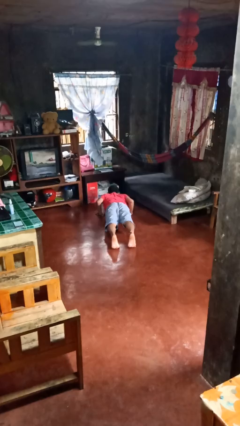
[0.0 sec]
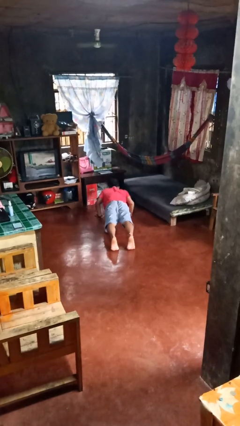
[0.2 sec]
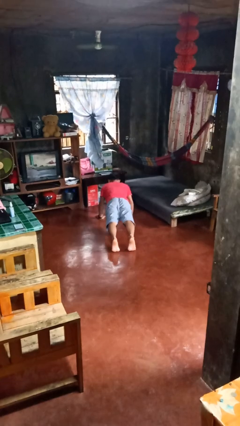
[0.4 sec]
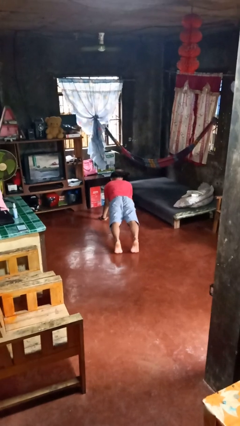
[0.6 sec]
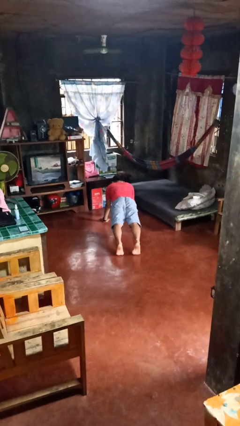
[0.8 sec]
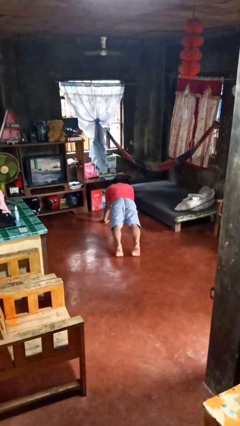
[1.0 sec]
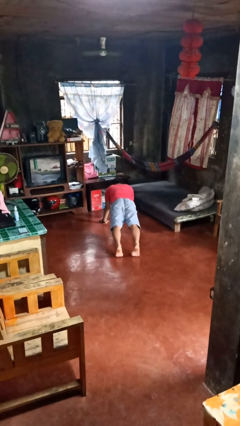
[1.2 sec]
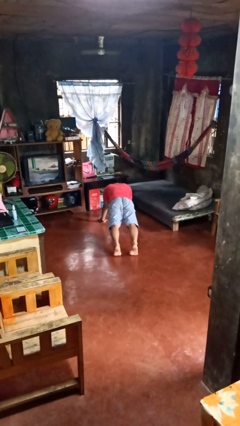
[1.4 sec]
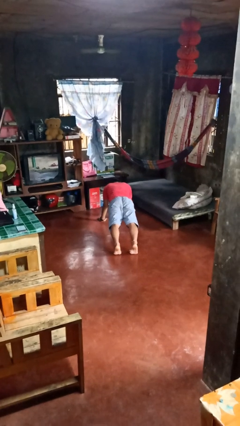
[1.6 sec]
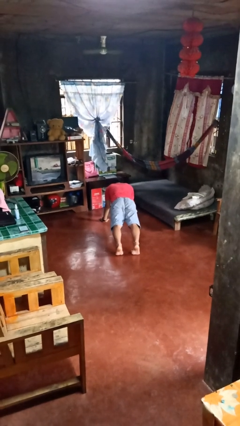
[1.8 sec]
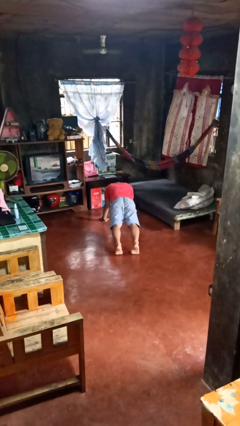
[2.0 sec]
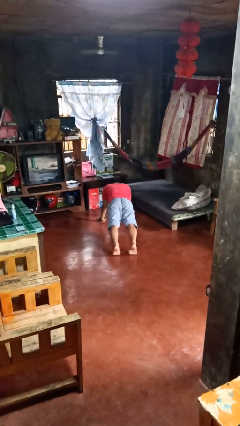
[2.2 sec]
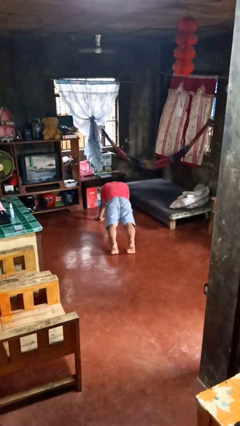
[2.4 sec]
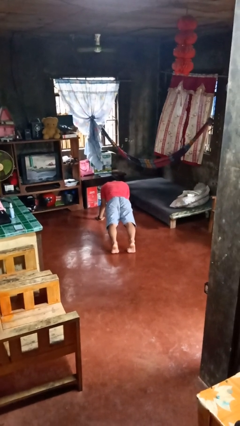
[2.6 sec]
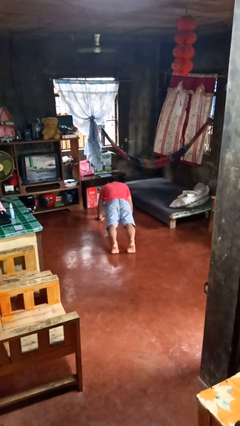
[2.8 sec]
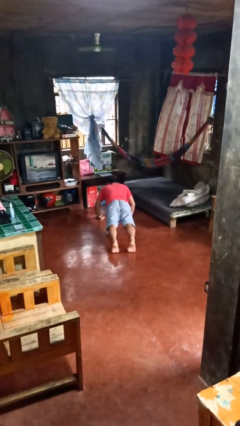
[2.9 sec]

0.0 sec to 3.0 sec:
person exercises with pushup

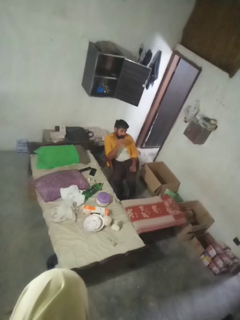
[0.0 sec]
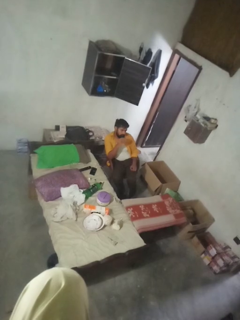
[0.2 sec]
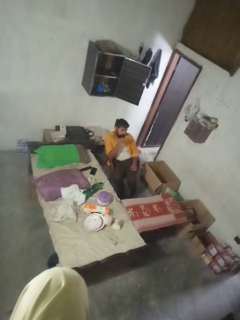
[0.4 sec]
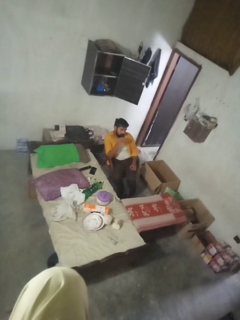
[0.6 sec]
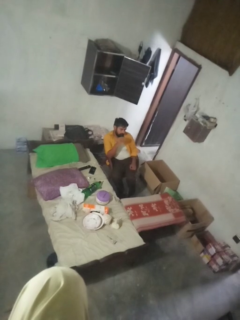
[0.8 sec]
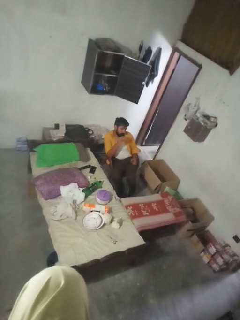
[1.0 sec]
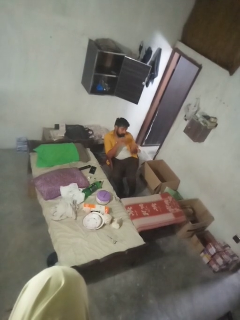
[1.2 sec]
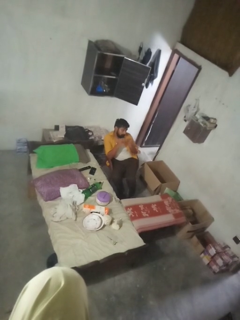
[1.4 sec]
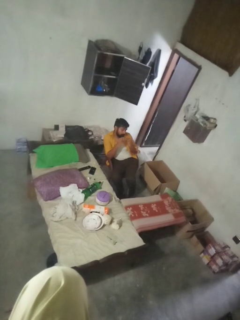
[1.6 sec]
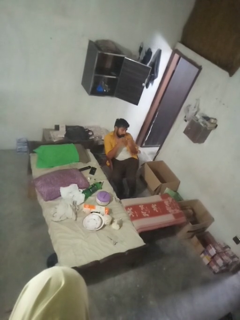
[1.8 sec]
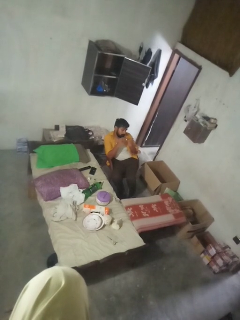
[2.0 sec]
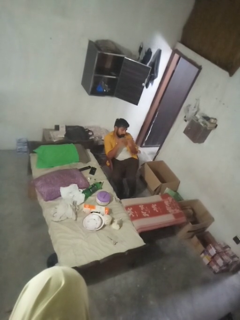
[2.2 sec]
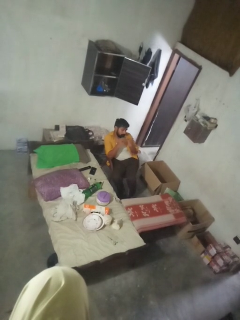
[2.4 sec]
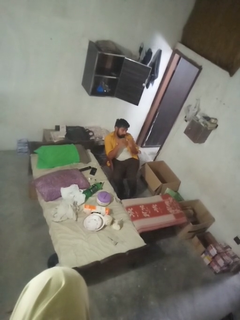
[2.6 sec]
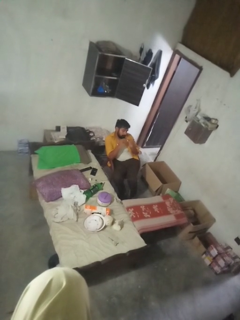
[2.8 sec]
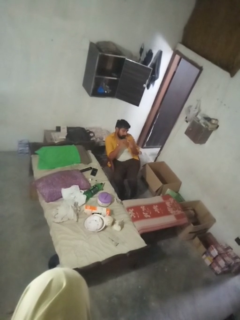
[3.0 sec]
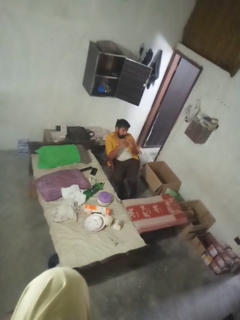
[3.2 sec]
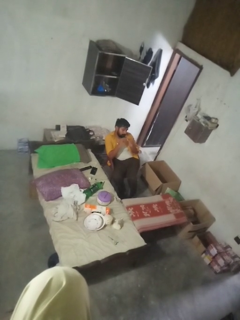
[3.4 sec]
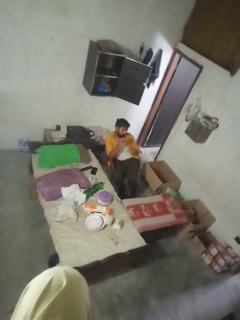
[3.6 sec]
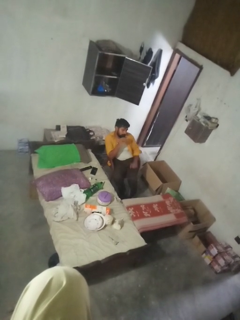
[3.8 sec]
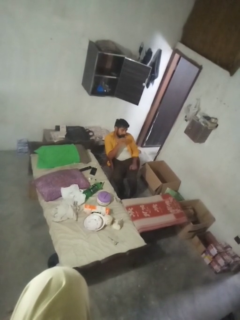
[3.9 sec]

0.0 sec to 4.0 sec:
person clips fingernails

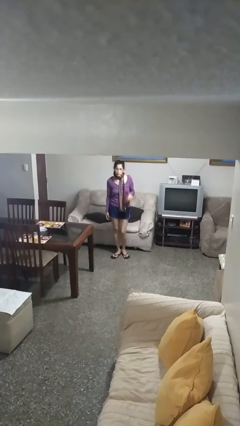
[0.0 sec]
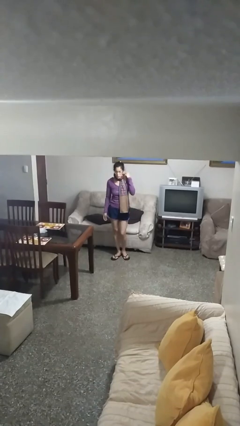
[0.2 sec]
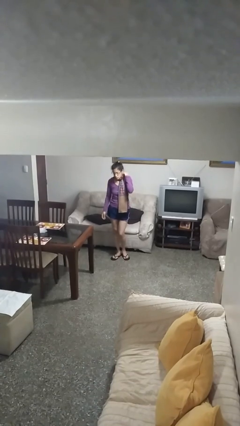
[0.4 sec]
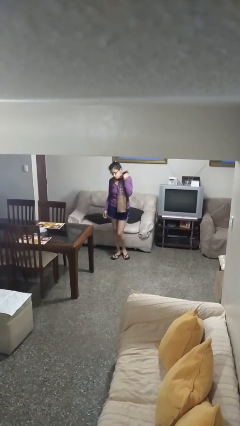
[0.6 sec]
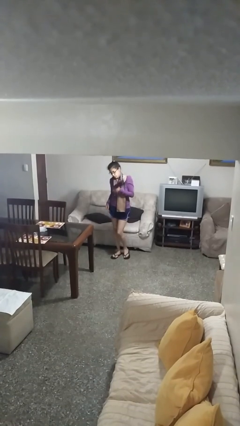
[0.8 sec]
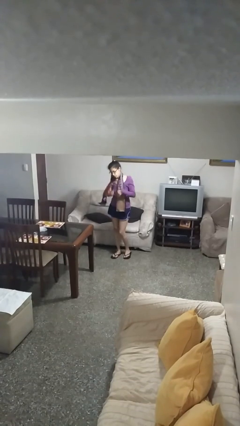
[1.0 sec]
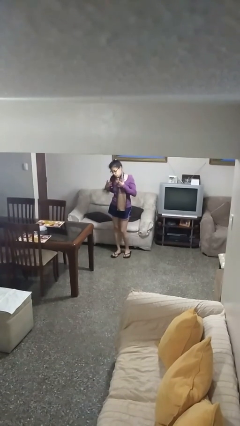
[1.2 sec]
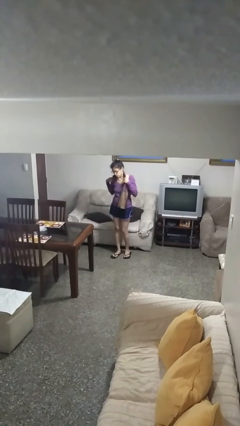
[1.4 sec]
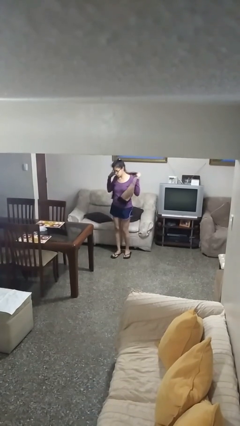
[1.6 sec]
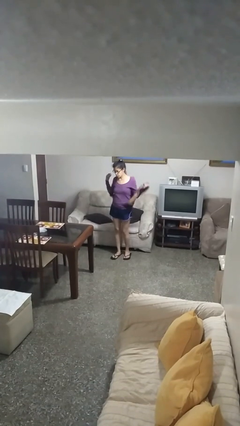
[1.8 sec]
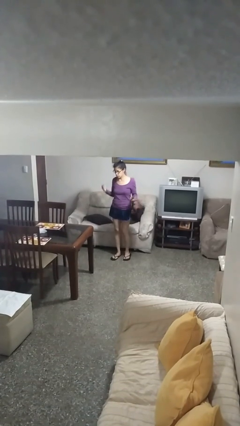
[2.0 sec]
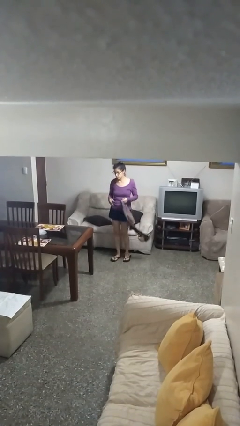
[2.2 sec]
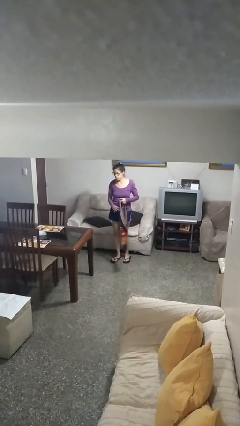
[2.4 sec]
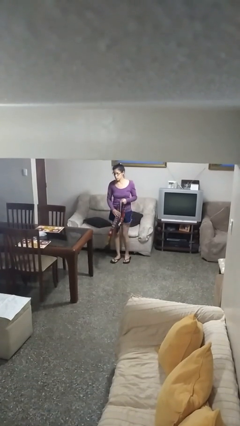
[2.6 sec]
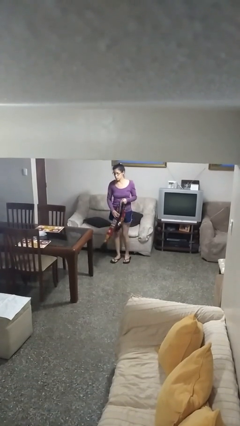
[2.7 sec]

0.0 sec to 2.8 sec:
person takes off scarf

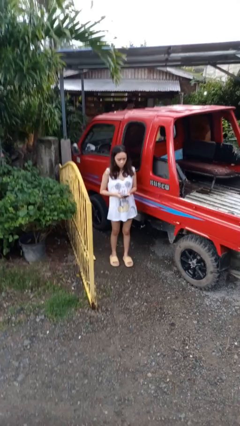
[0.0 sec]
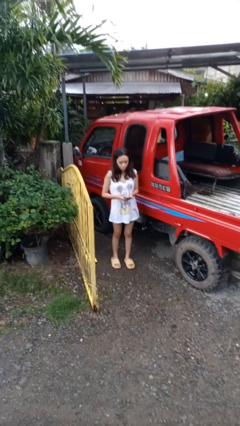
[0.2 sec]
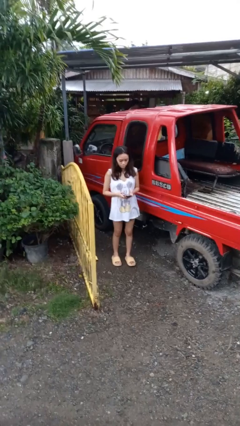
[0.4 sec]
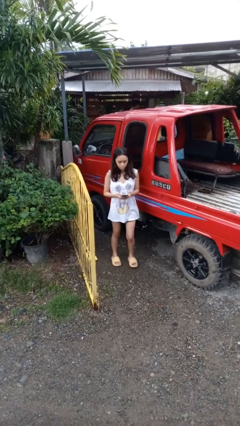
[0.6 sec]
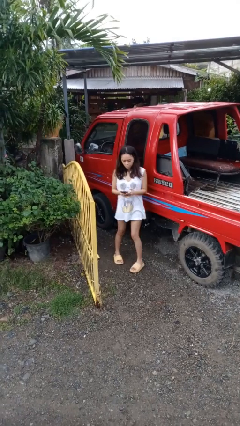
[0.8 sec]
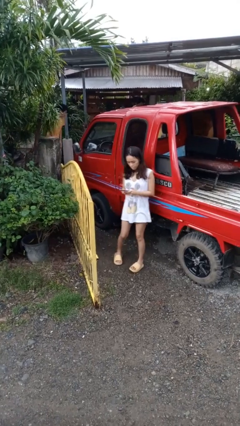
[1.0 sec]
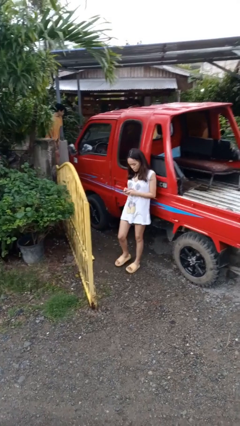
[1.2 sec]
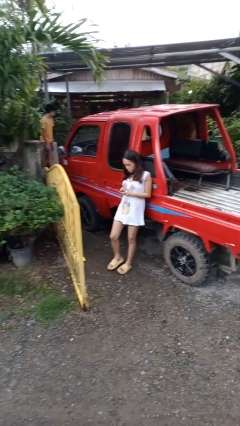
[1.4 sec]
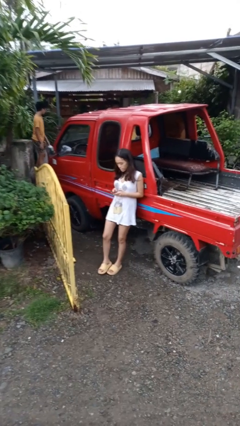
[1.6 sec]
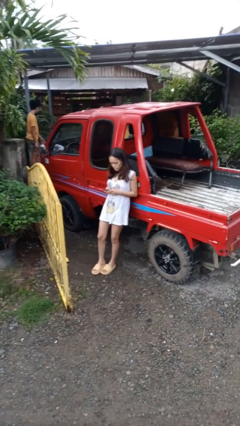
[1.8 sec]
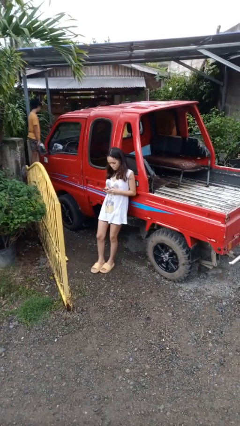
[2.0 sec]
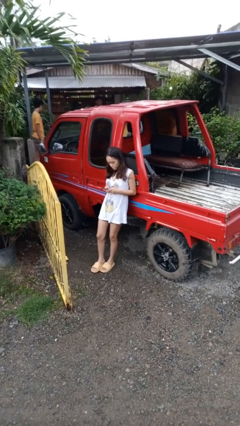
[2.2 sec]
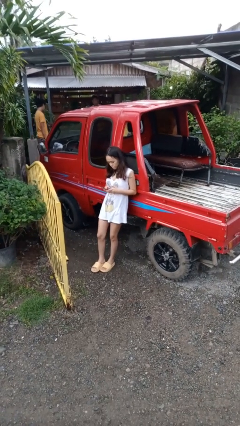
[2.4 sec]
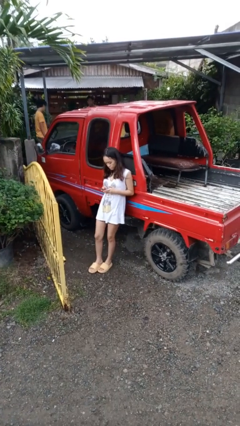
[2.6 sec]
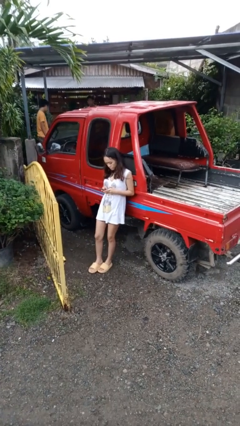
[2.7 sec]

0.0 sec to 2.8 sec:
person leans against car

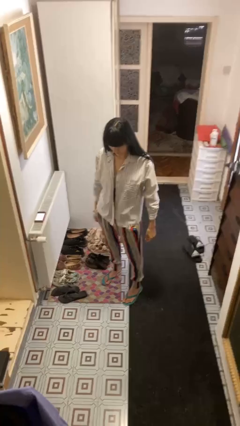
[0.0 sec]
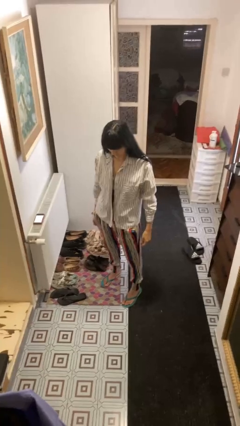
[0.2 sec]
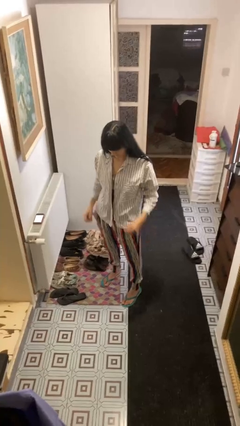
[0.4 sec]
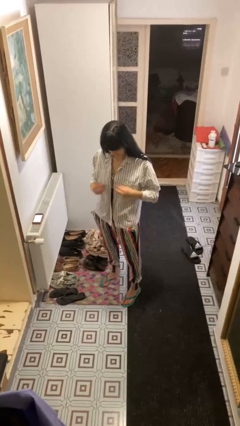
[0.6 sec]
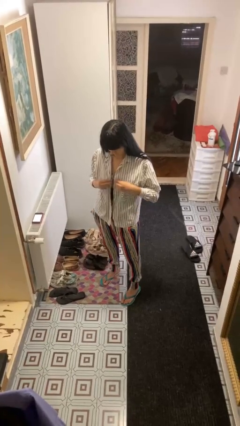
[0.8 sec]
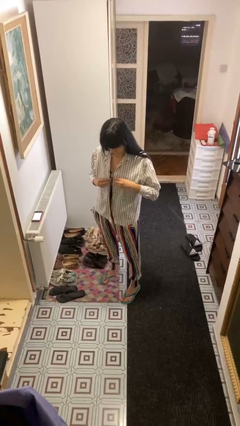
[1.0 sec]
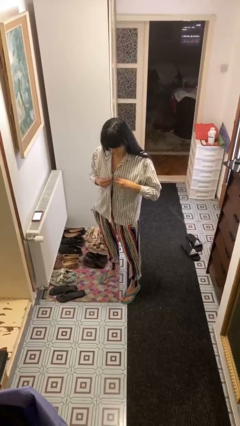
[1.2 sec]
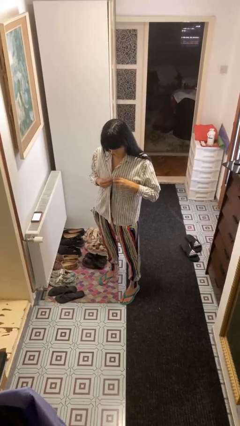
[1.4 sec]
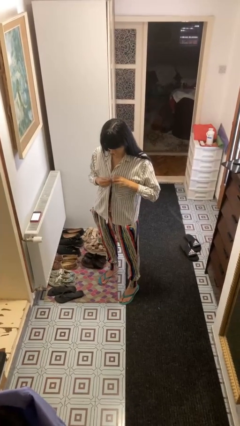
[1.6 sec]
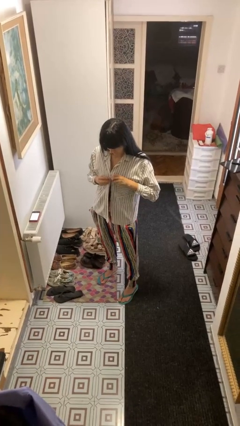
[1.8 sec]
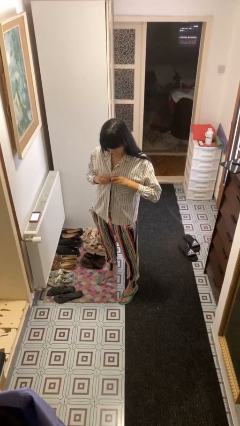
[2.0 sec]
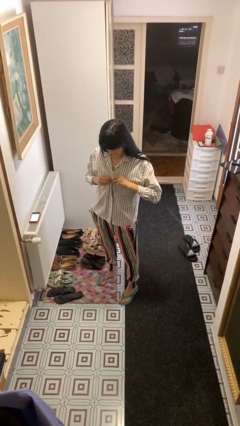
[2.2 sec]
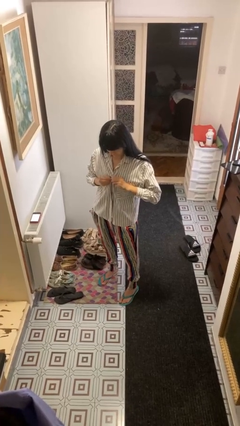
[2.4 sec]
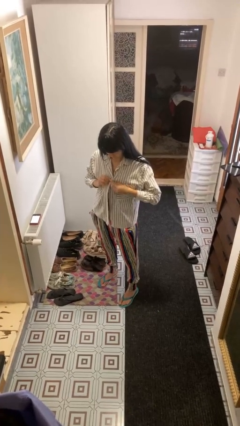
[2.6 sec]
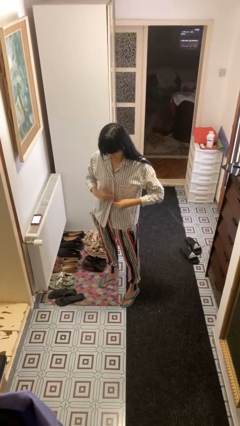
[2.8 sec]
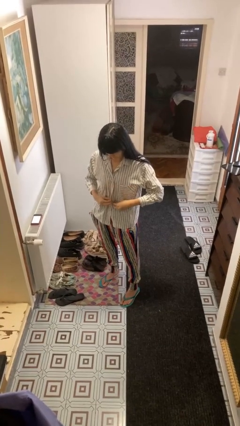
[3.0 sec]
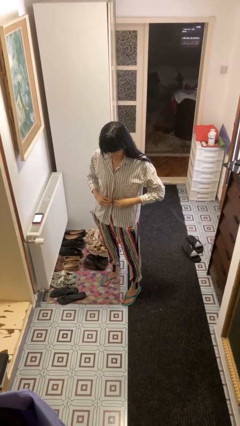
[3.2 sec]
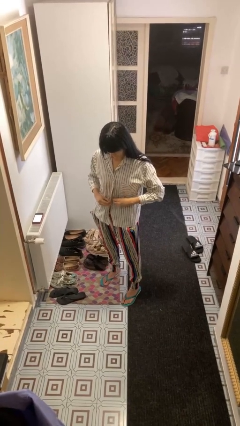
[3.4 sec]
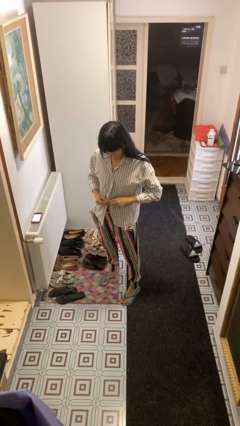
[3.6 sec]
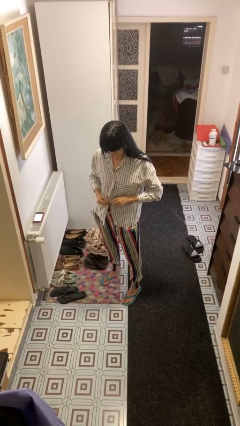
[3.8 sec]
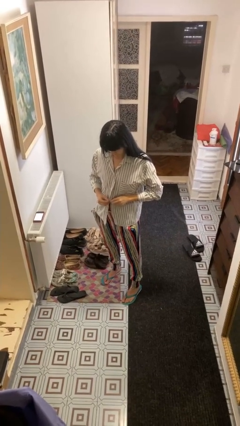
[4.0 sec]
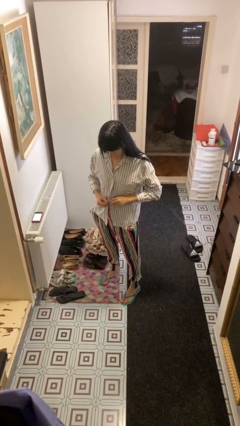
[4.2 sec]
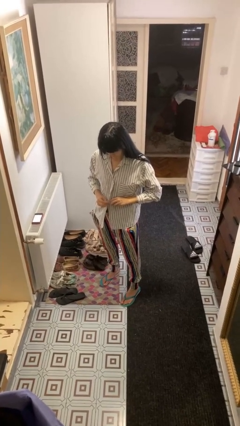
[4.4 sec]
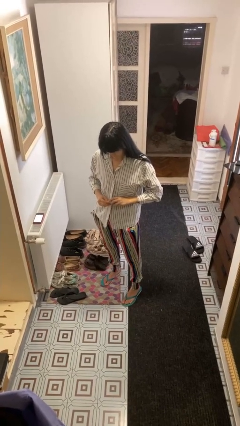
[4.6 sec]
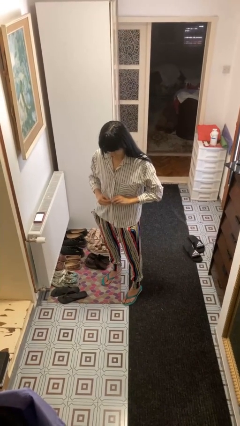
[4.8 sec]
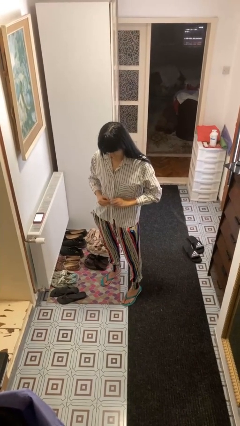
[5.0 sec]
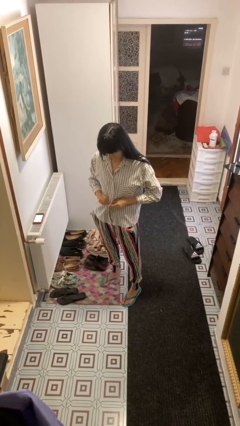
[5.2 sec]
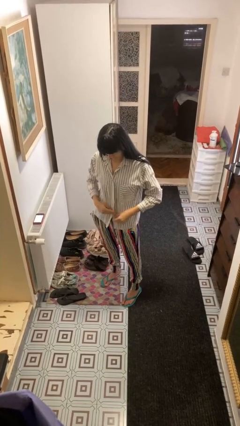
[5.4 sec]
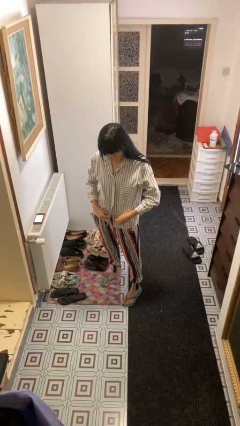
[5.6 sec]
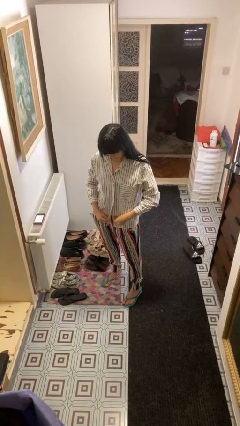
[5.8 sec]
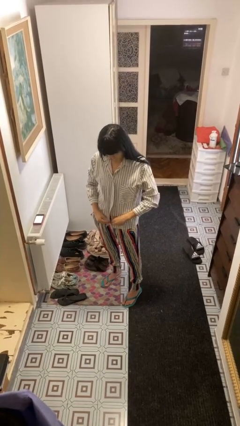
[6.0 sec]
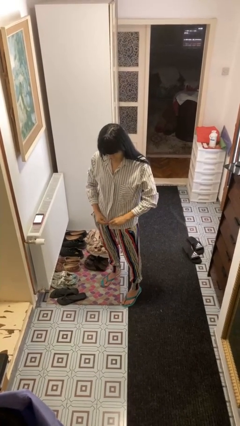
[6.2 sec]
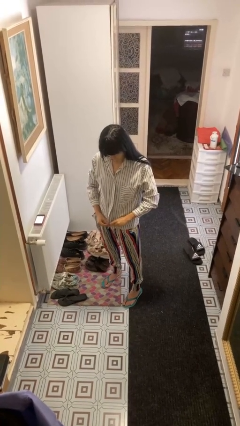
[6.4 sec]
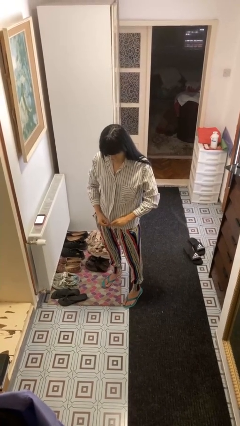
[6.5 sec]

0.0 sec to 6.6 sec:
person buttons shirt
